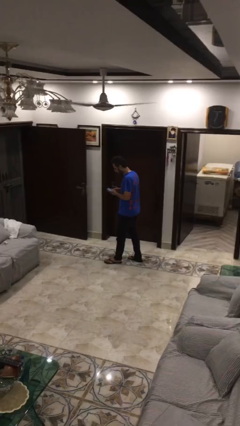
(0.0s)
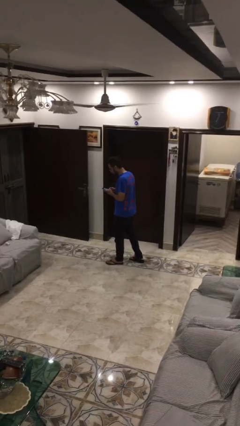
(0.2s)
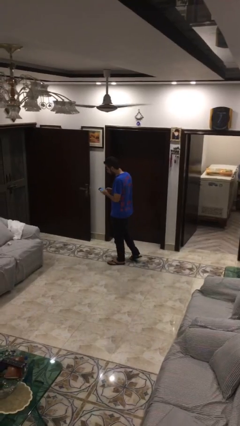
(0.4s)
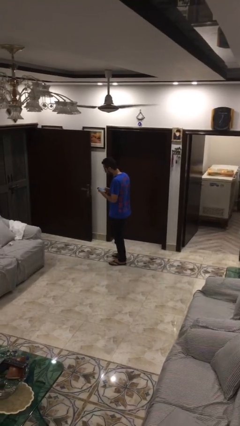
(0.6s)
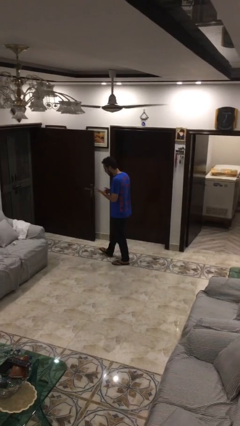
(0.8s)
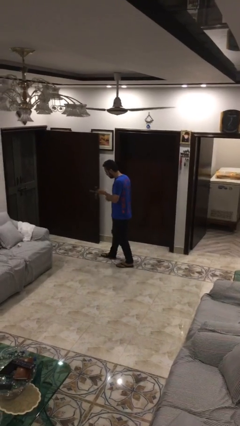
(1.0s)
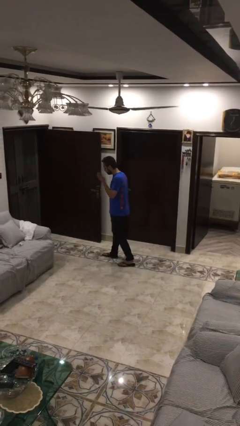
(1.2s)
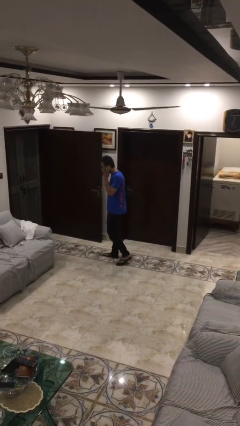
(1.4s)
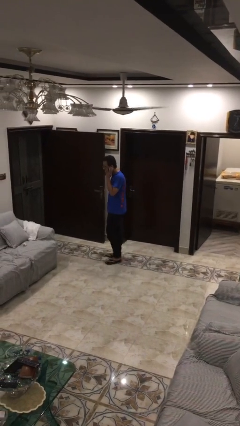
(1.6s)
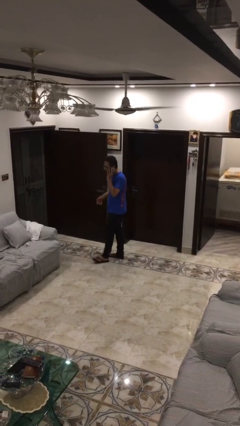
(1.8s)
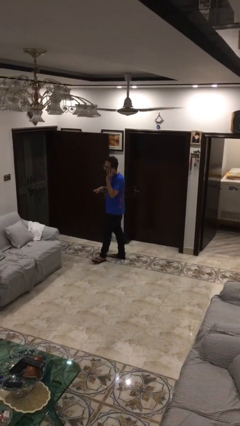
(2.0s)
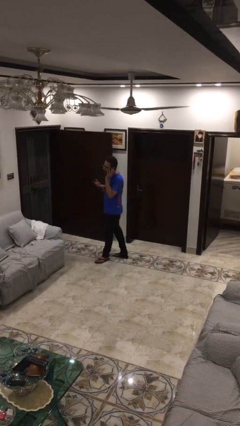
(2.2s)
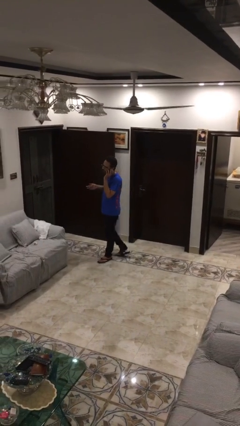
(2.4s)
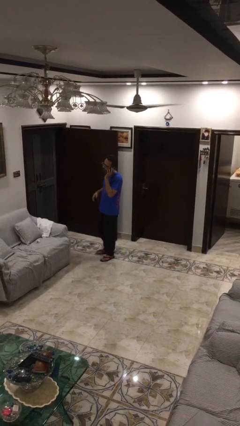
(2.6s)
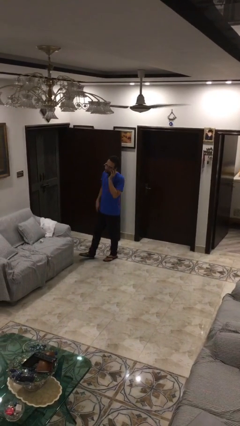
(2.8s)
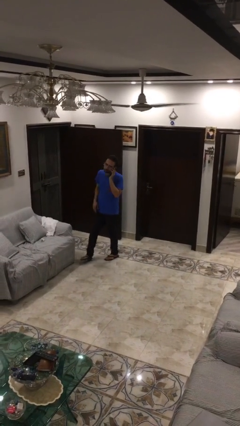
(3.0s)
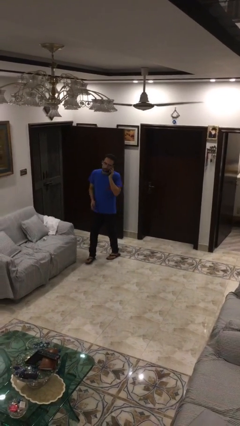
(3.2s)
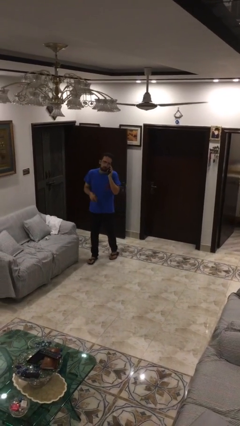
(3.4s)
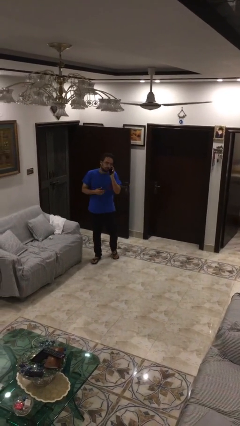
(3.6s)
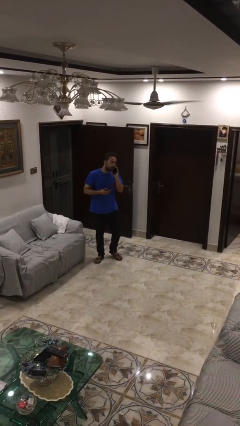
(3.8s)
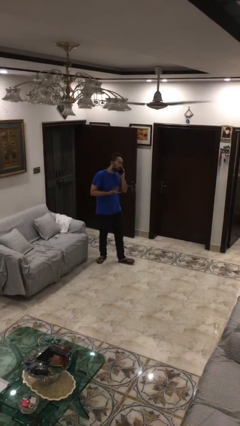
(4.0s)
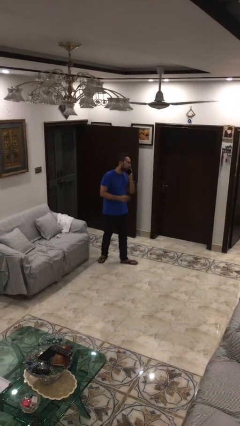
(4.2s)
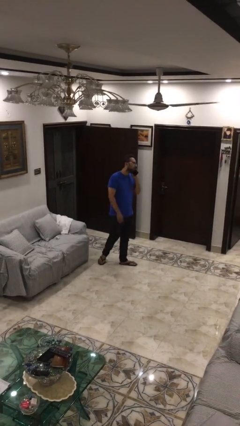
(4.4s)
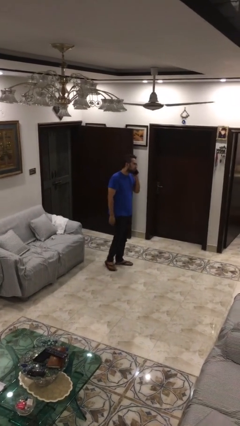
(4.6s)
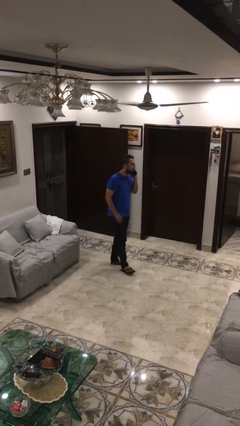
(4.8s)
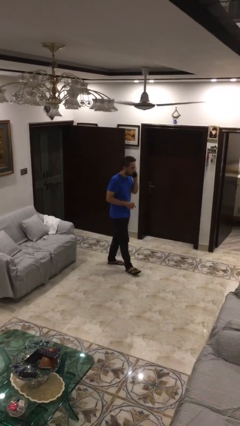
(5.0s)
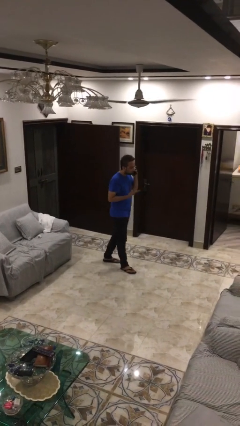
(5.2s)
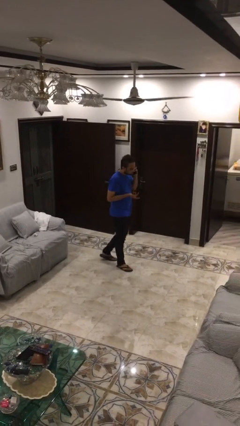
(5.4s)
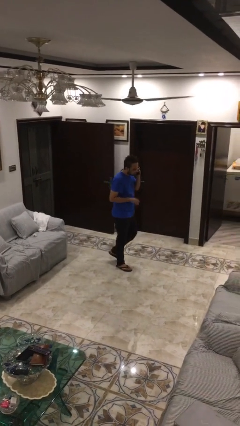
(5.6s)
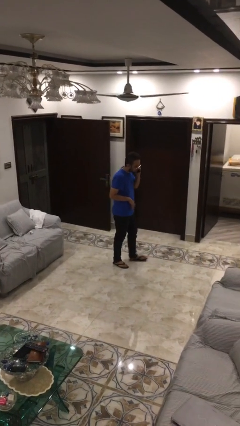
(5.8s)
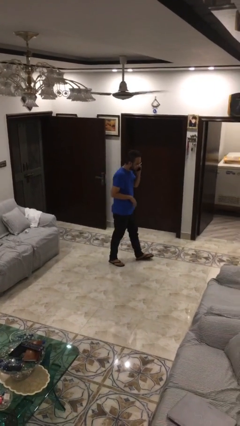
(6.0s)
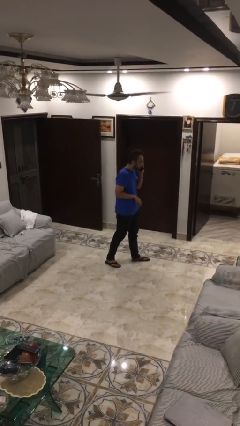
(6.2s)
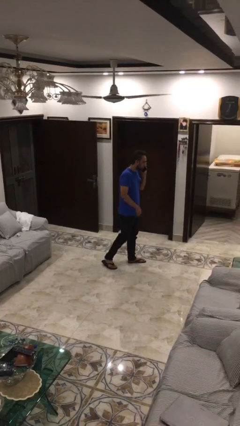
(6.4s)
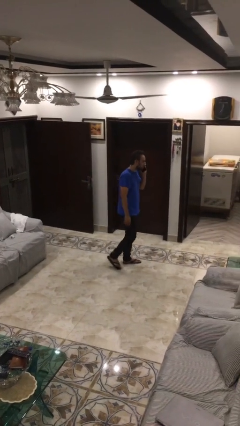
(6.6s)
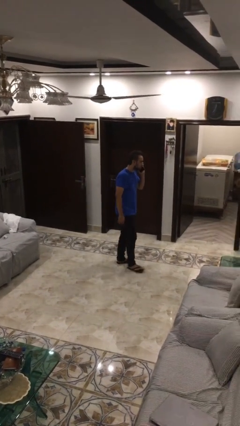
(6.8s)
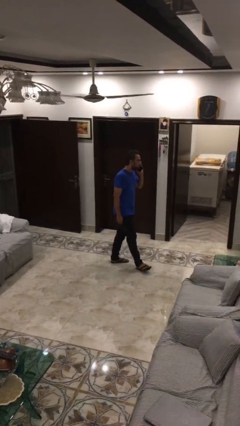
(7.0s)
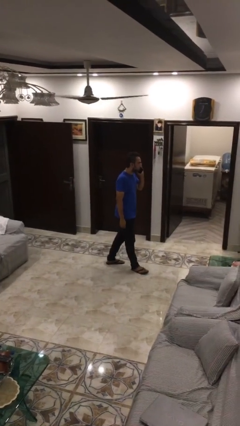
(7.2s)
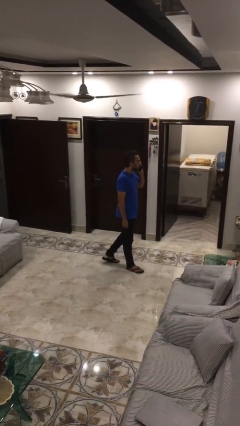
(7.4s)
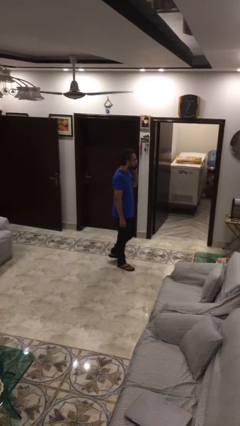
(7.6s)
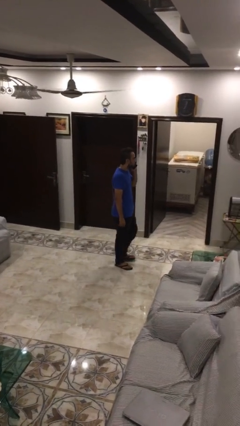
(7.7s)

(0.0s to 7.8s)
person talks on phone

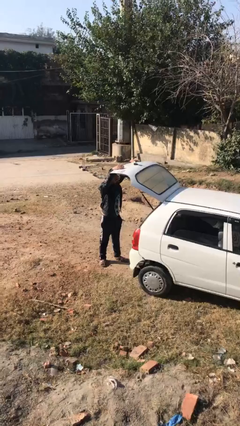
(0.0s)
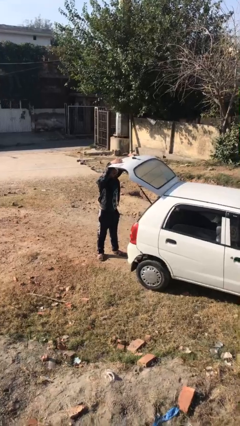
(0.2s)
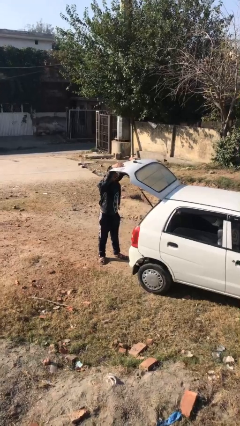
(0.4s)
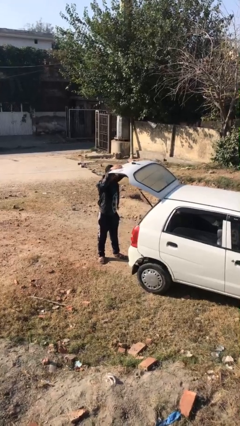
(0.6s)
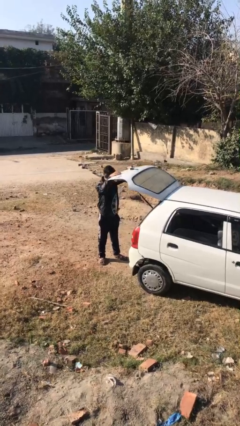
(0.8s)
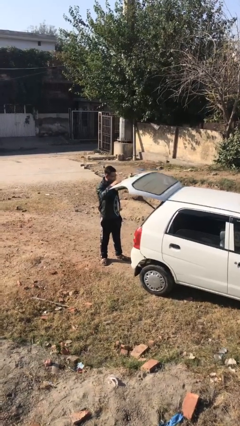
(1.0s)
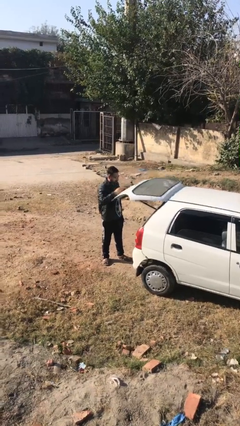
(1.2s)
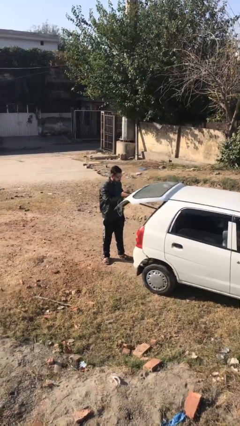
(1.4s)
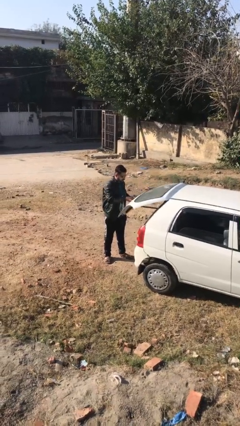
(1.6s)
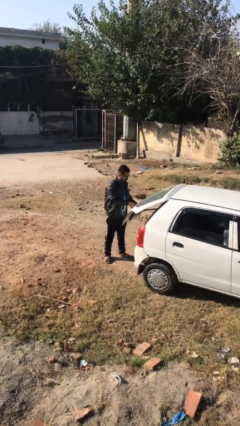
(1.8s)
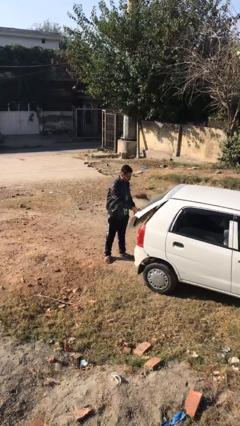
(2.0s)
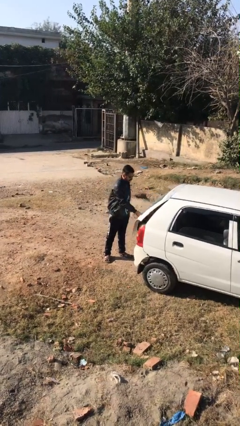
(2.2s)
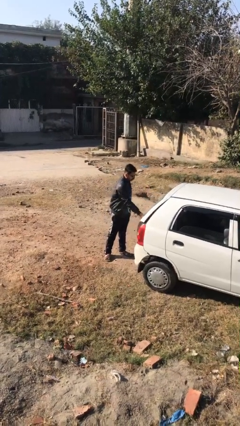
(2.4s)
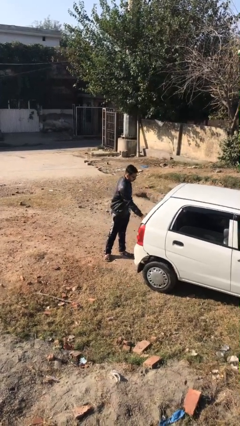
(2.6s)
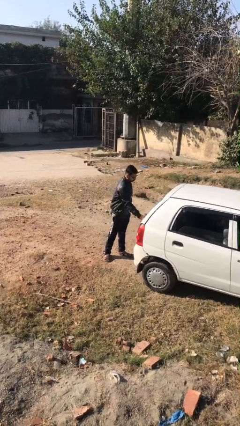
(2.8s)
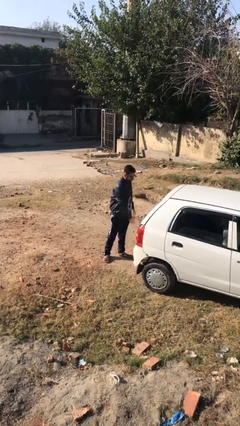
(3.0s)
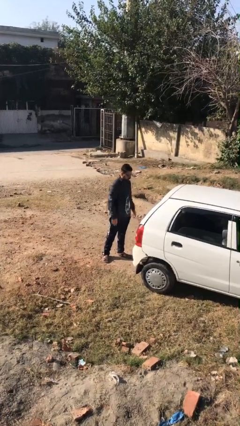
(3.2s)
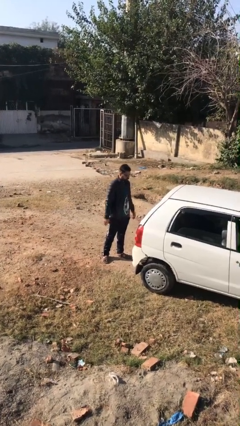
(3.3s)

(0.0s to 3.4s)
person closes car trunk

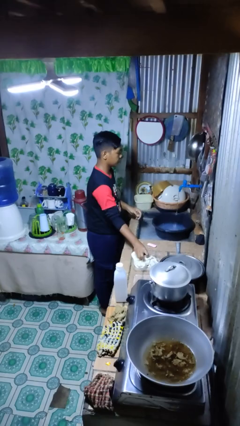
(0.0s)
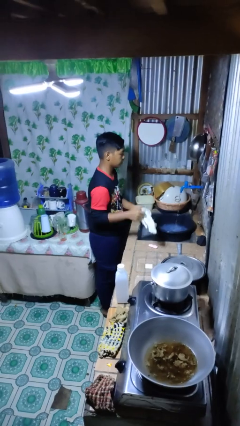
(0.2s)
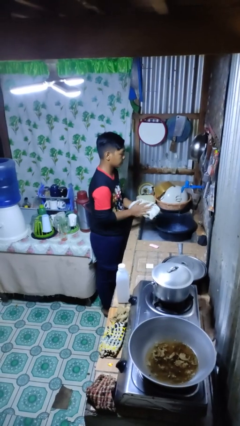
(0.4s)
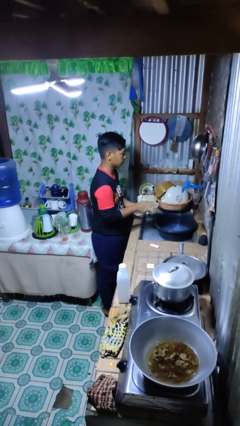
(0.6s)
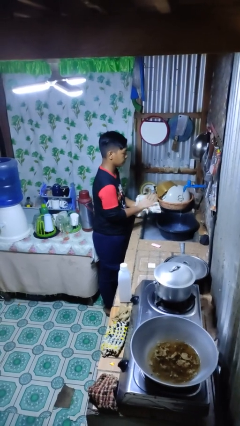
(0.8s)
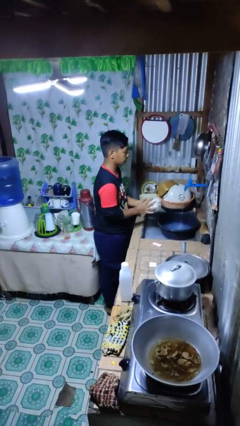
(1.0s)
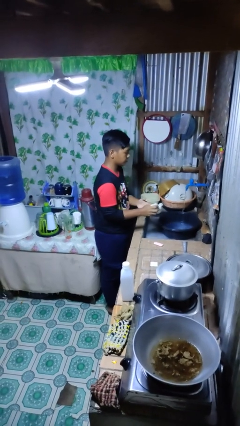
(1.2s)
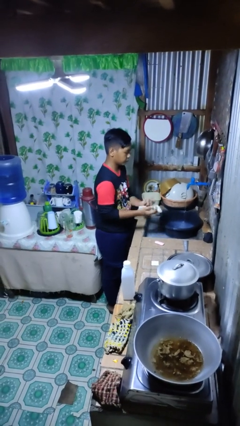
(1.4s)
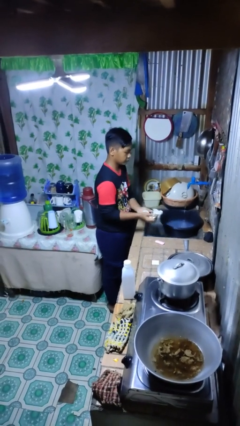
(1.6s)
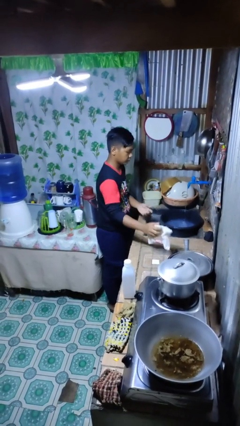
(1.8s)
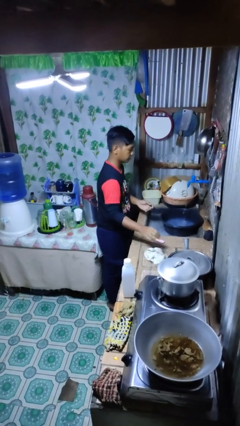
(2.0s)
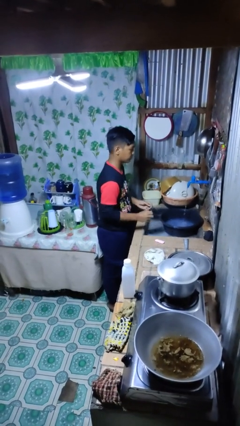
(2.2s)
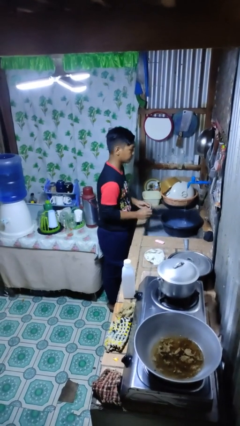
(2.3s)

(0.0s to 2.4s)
person dries hands with towel

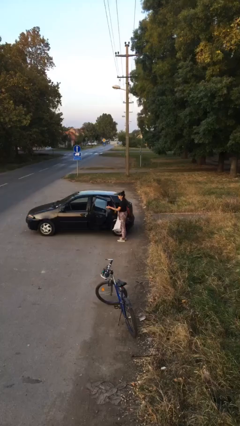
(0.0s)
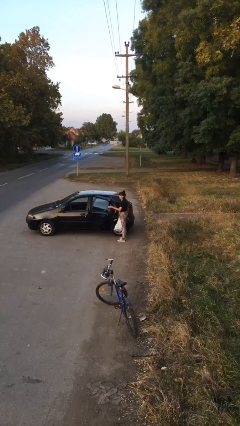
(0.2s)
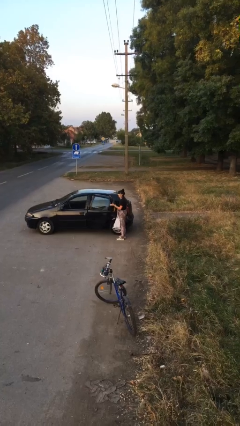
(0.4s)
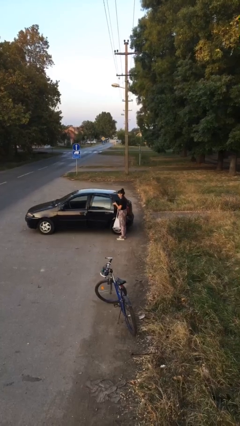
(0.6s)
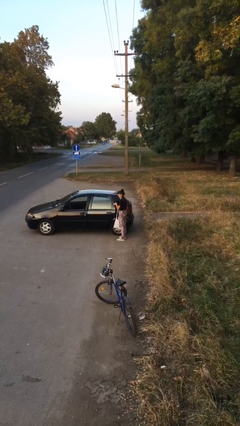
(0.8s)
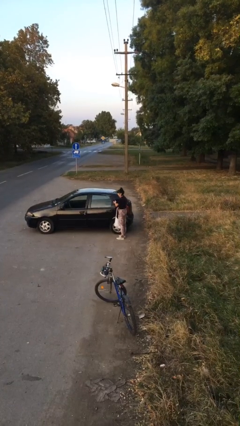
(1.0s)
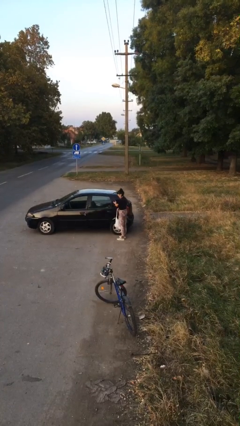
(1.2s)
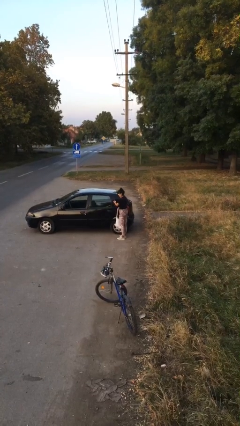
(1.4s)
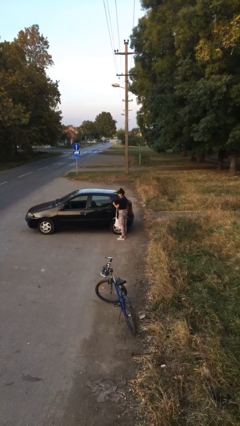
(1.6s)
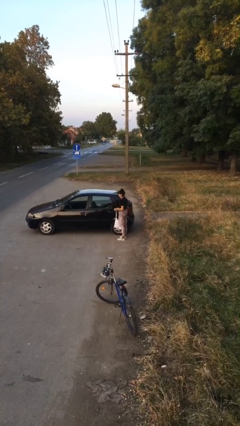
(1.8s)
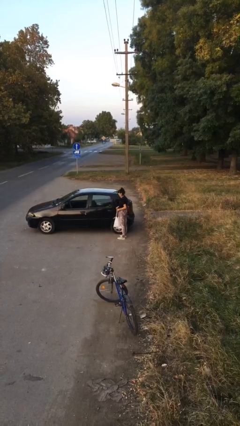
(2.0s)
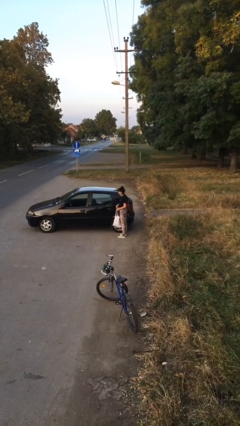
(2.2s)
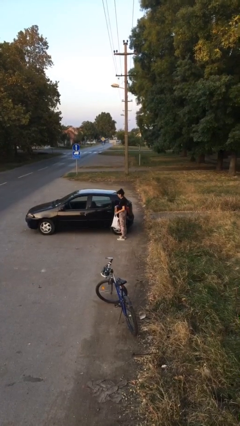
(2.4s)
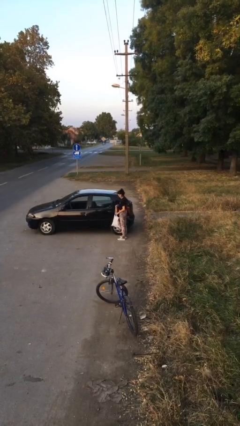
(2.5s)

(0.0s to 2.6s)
person closes car door

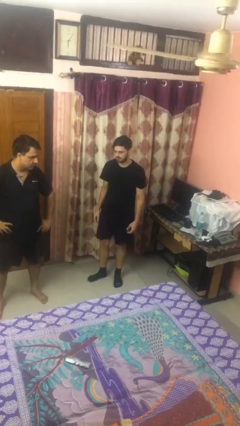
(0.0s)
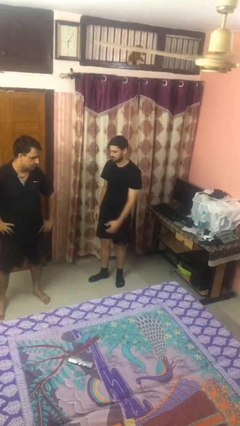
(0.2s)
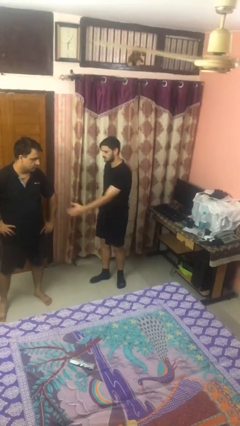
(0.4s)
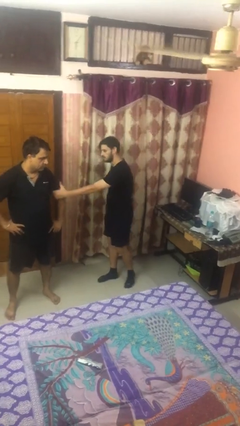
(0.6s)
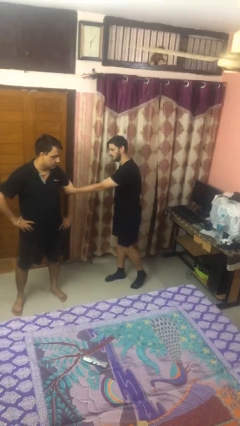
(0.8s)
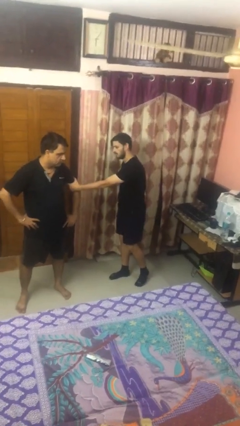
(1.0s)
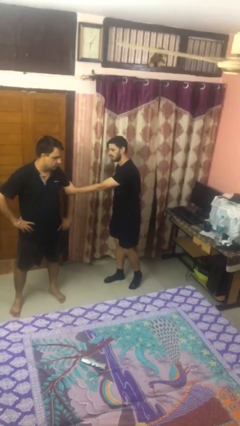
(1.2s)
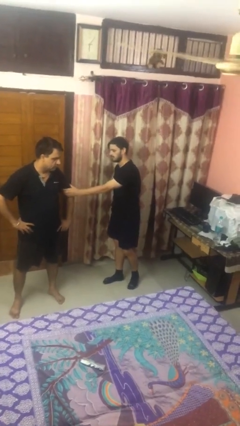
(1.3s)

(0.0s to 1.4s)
person grabs person by bicep

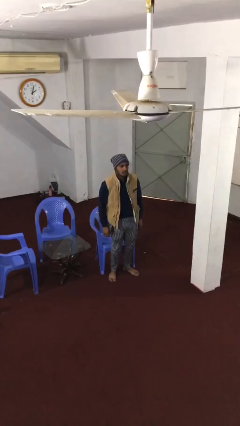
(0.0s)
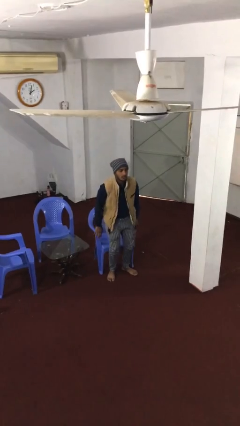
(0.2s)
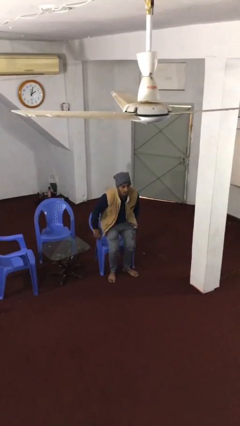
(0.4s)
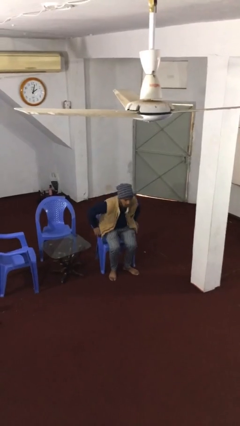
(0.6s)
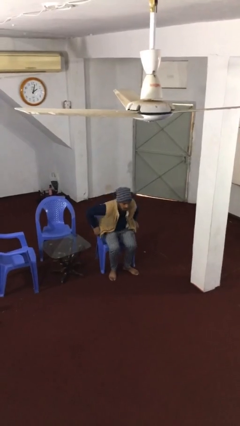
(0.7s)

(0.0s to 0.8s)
person sits down
